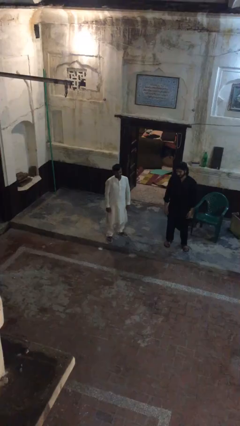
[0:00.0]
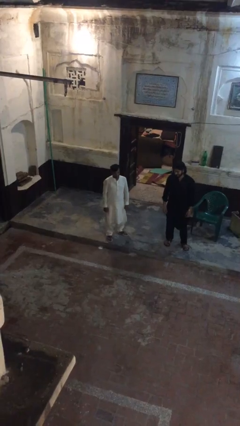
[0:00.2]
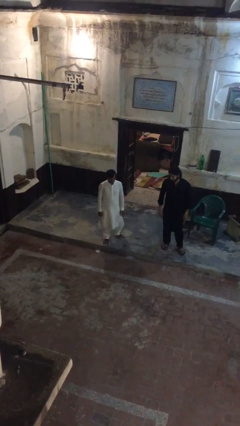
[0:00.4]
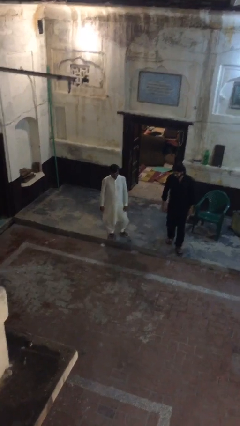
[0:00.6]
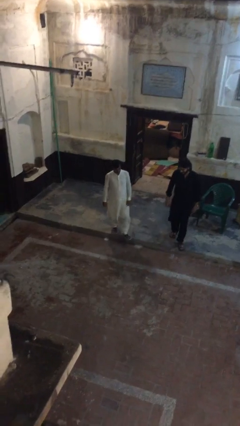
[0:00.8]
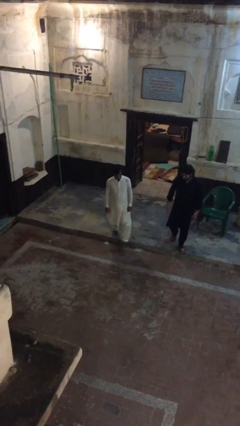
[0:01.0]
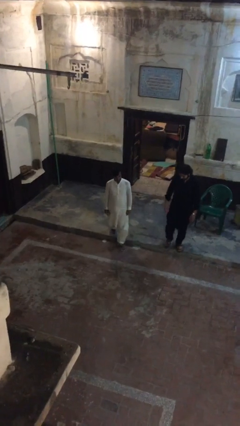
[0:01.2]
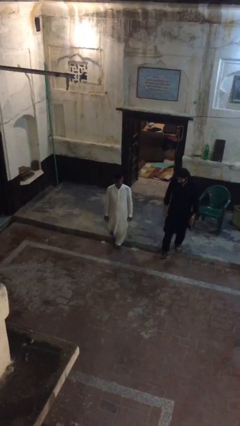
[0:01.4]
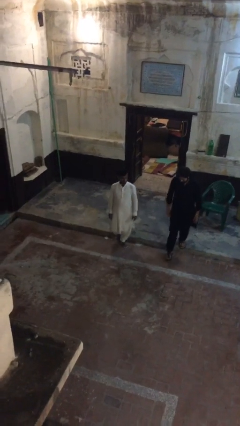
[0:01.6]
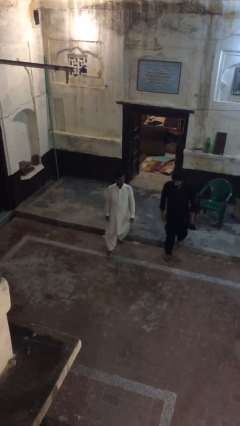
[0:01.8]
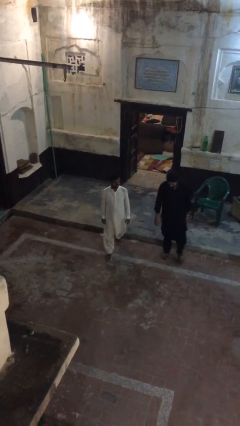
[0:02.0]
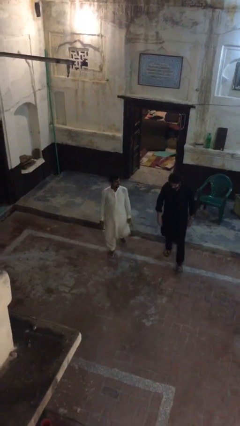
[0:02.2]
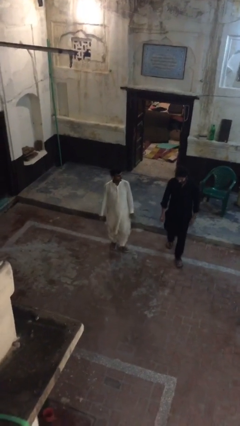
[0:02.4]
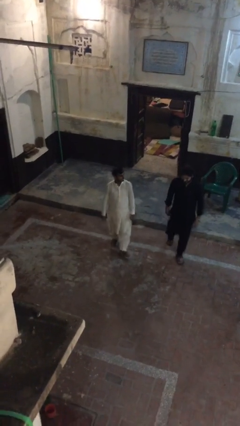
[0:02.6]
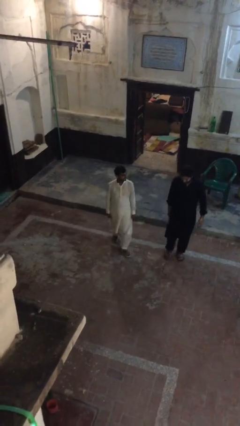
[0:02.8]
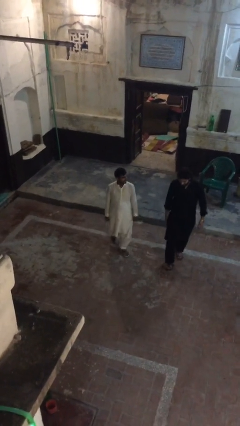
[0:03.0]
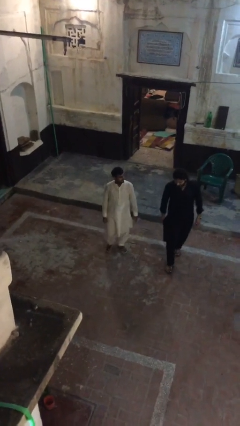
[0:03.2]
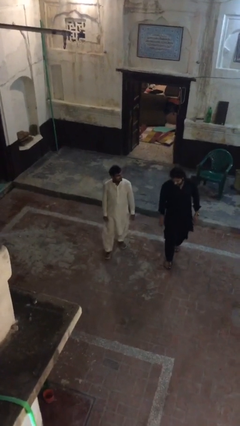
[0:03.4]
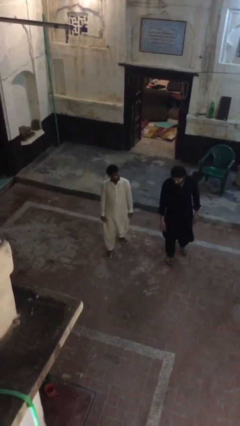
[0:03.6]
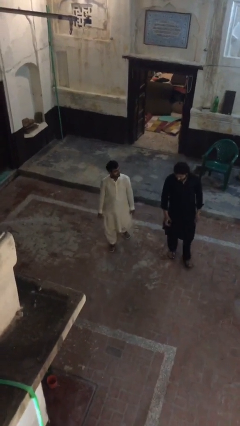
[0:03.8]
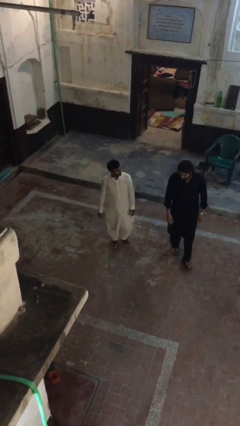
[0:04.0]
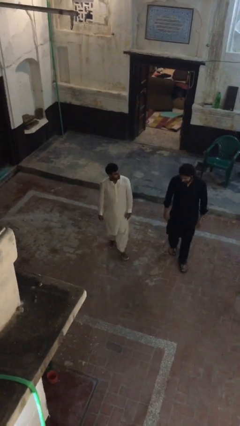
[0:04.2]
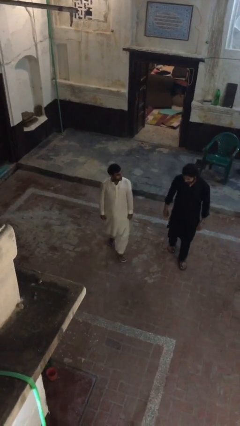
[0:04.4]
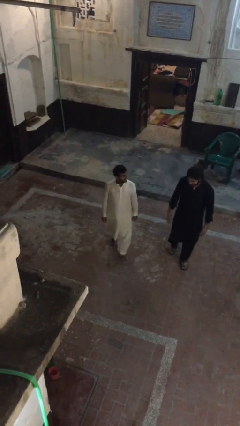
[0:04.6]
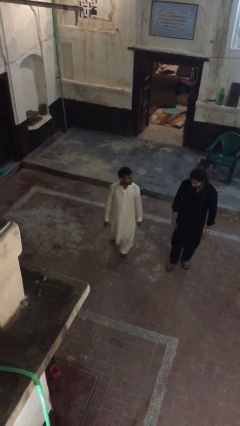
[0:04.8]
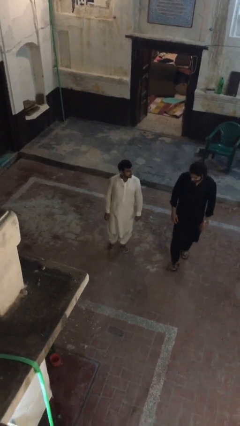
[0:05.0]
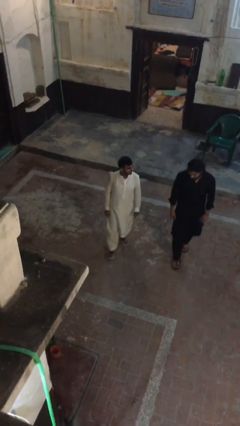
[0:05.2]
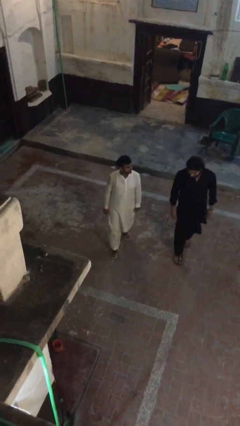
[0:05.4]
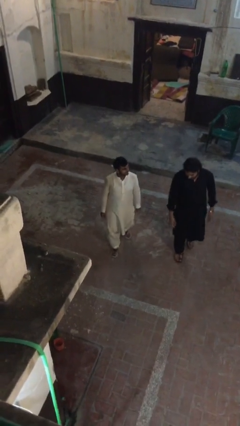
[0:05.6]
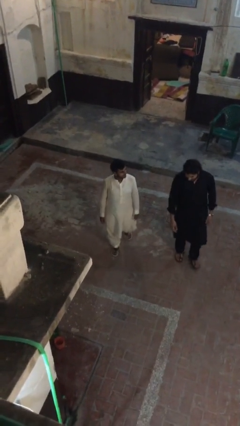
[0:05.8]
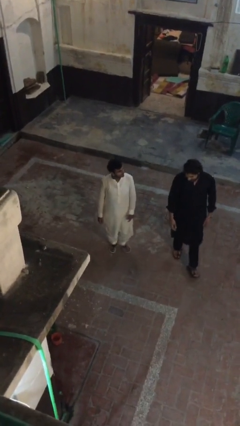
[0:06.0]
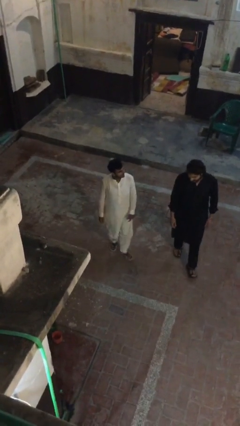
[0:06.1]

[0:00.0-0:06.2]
person talks to person

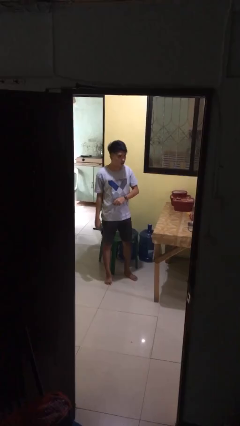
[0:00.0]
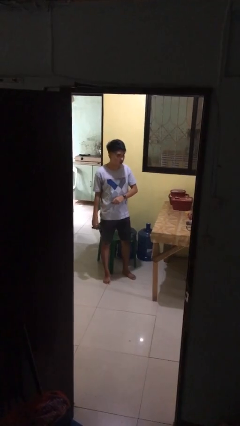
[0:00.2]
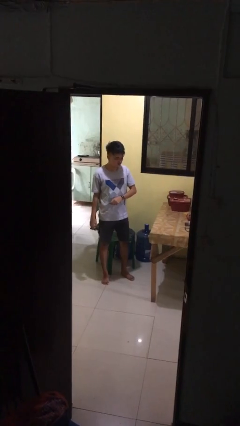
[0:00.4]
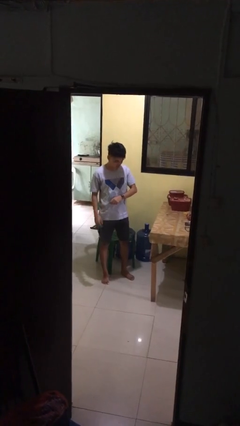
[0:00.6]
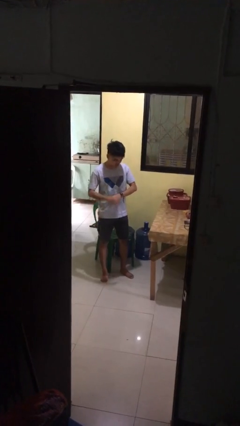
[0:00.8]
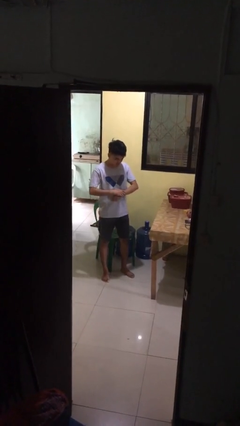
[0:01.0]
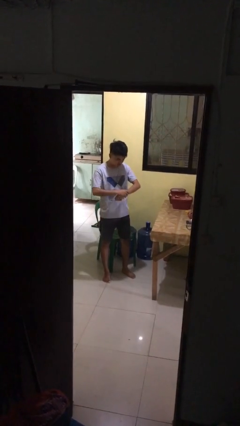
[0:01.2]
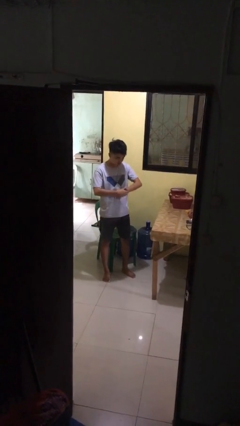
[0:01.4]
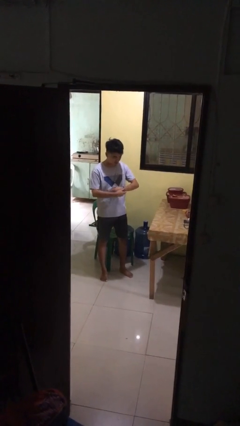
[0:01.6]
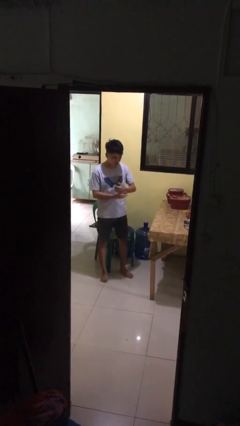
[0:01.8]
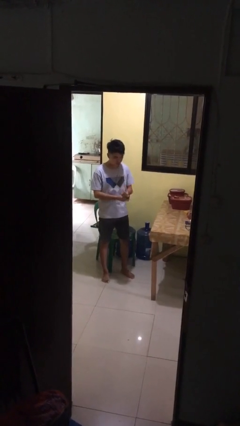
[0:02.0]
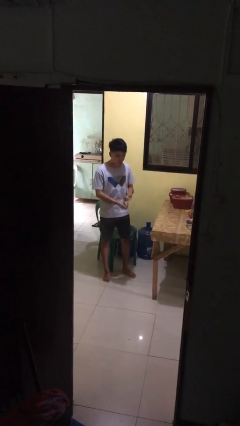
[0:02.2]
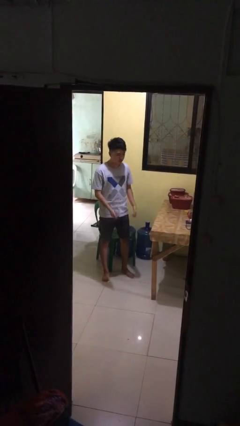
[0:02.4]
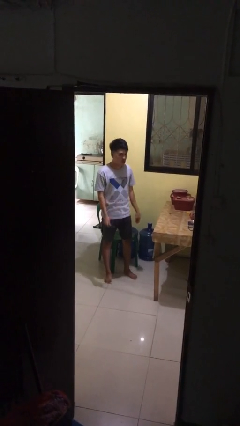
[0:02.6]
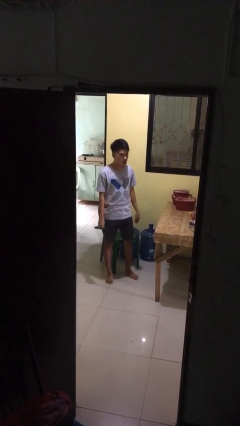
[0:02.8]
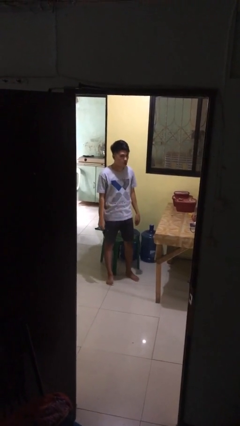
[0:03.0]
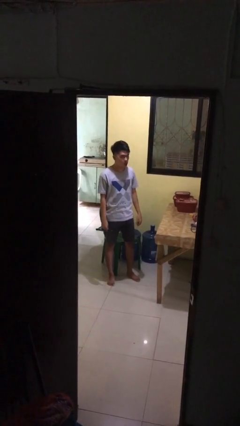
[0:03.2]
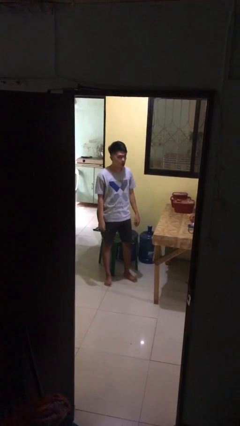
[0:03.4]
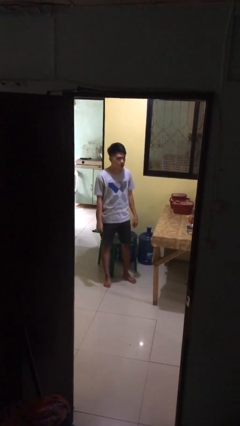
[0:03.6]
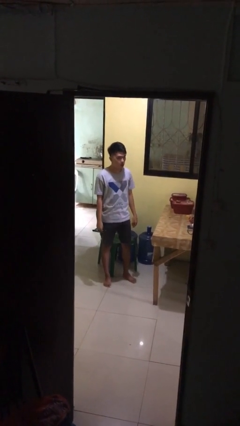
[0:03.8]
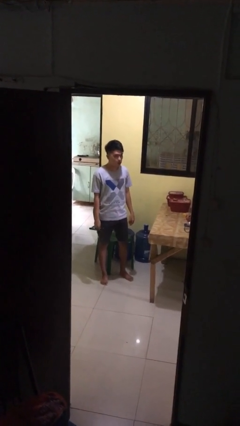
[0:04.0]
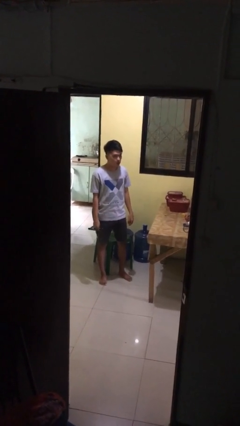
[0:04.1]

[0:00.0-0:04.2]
person takes off wristwatch

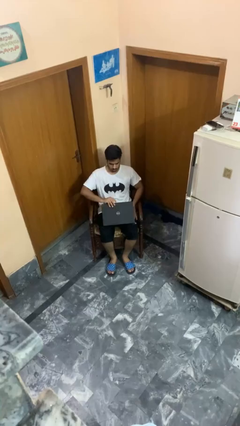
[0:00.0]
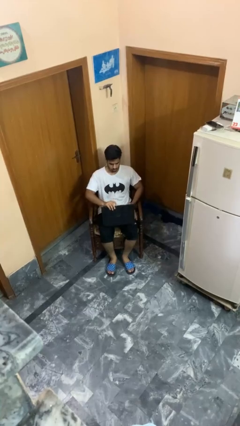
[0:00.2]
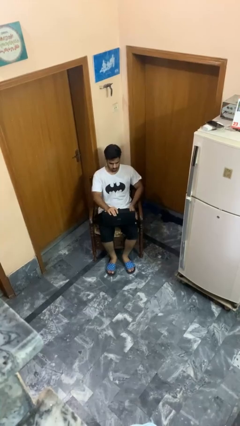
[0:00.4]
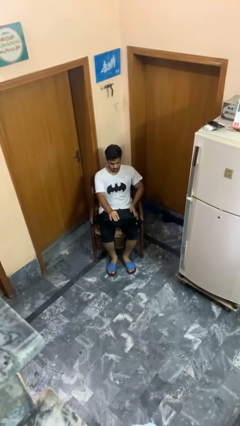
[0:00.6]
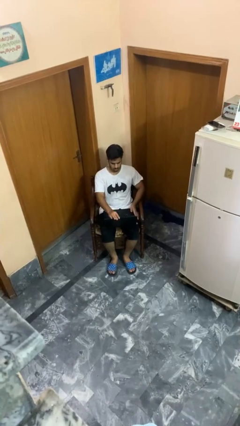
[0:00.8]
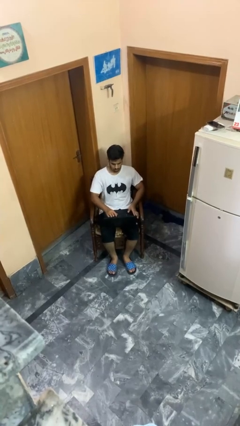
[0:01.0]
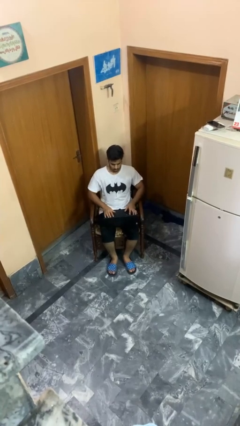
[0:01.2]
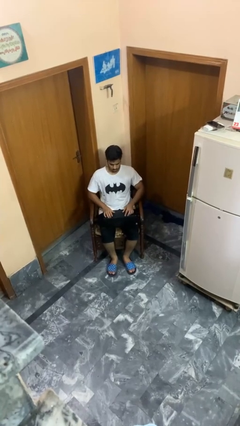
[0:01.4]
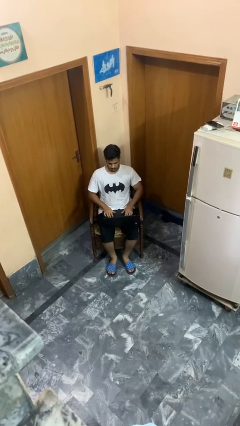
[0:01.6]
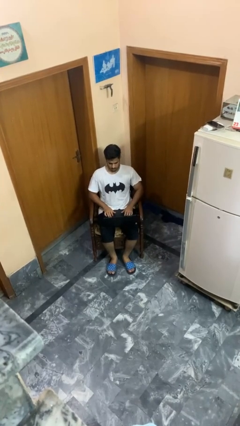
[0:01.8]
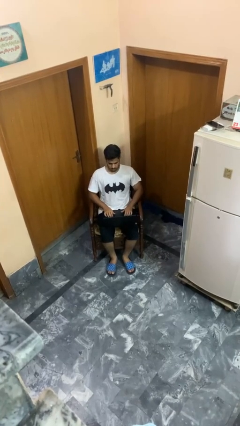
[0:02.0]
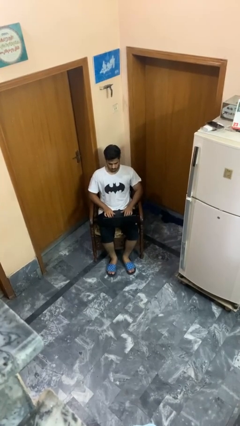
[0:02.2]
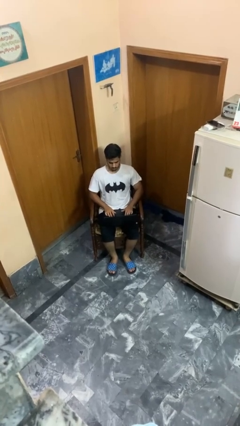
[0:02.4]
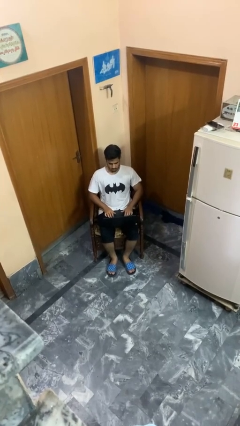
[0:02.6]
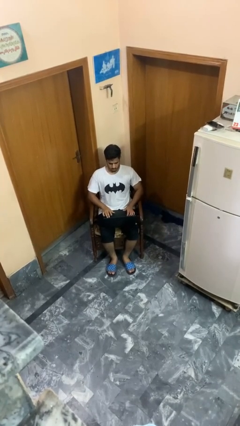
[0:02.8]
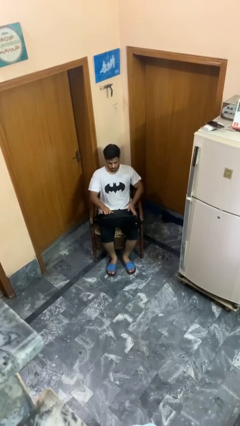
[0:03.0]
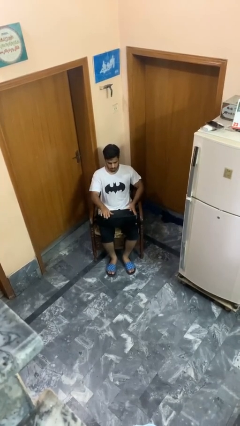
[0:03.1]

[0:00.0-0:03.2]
person opens laptop

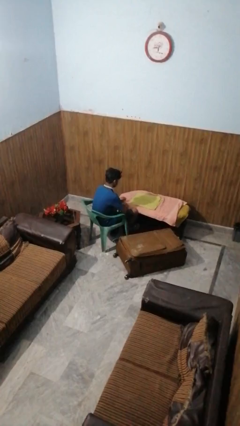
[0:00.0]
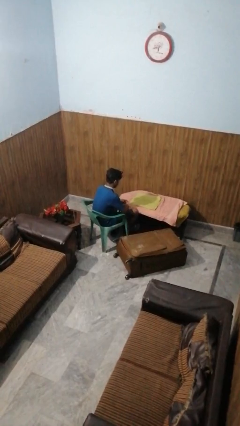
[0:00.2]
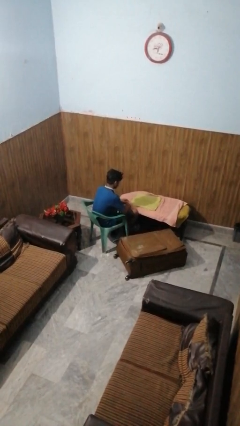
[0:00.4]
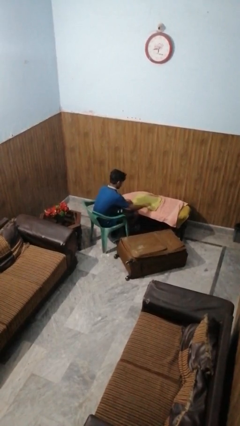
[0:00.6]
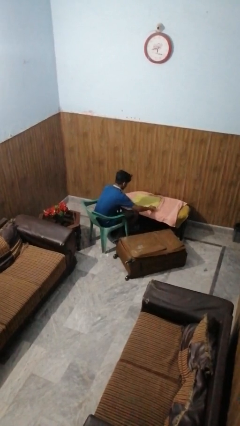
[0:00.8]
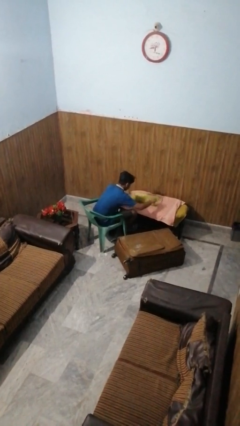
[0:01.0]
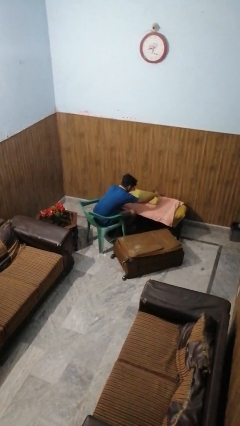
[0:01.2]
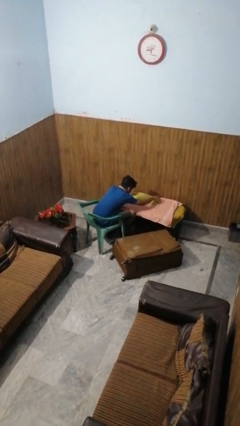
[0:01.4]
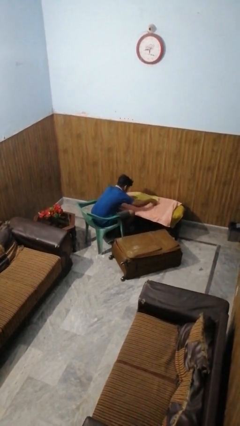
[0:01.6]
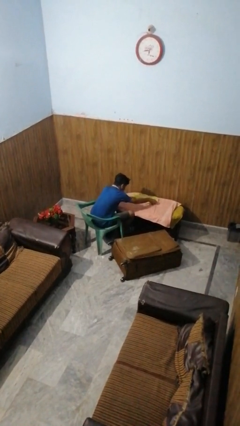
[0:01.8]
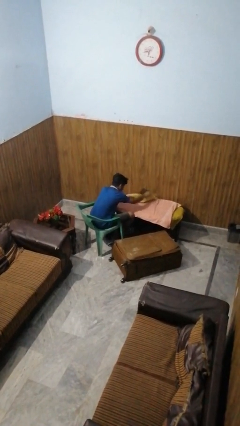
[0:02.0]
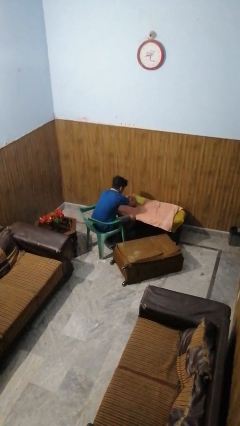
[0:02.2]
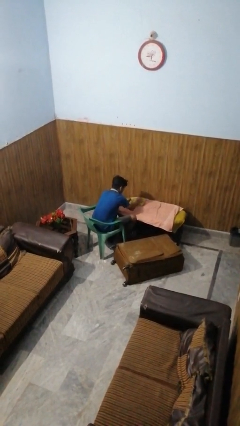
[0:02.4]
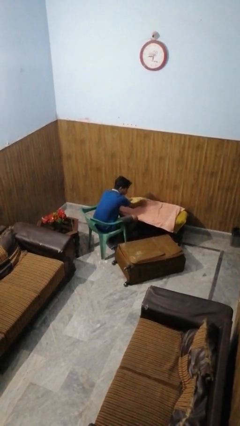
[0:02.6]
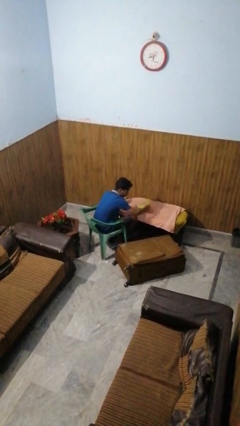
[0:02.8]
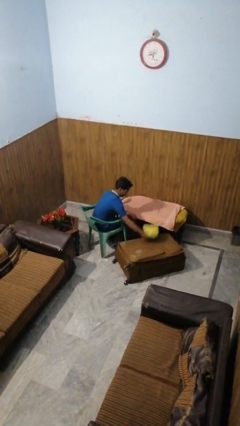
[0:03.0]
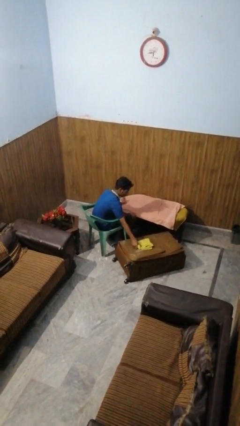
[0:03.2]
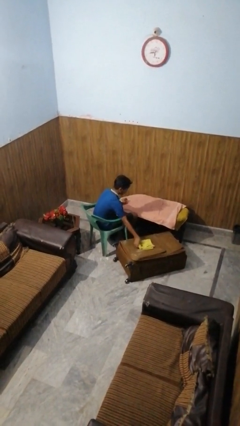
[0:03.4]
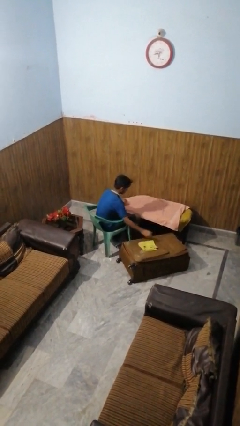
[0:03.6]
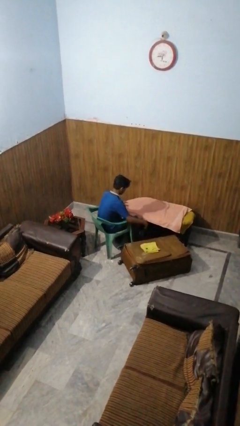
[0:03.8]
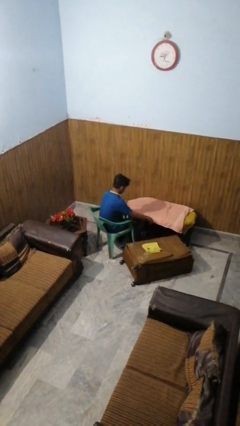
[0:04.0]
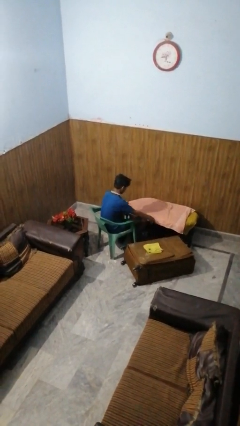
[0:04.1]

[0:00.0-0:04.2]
person folds towel
